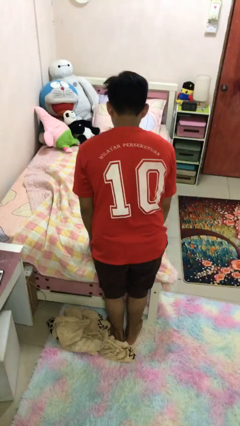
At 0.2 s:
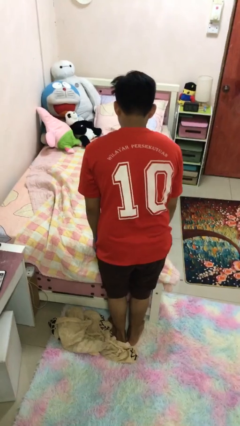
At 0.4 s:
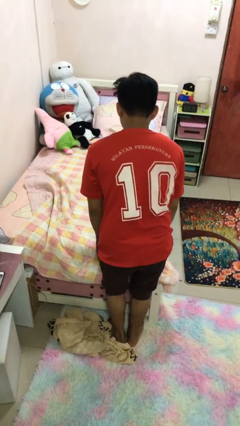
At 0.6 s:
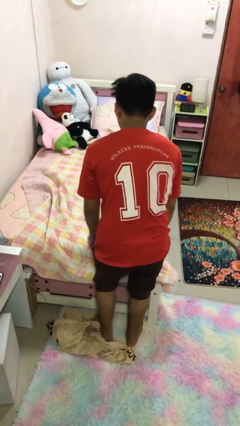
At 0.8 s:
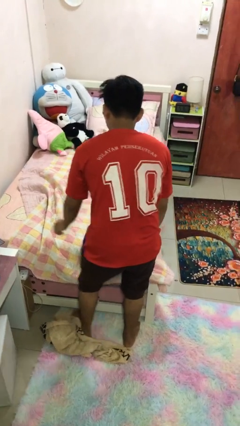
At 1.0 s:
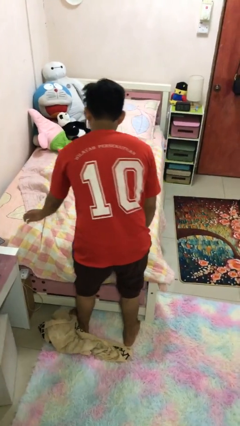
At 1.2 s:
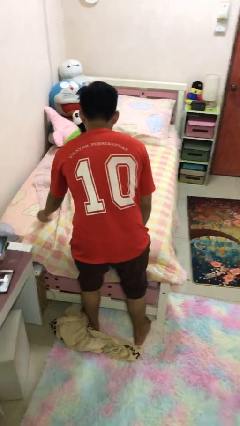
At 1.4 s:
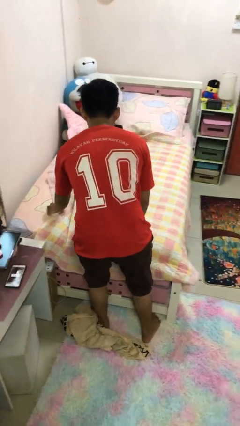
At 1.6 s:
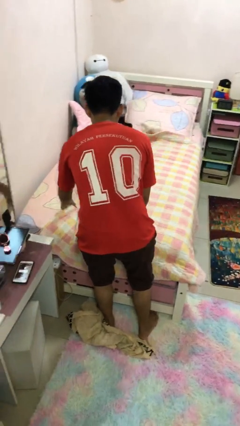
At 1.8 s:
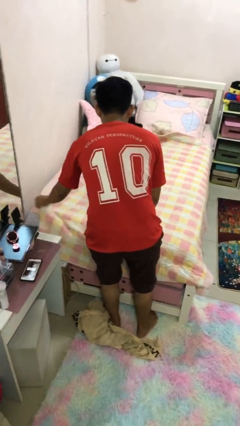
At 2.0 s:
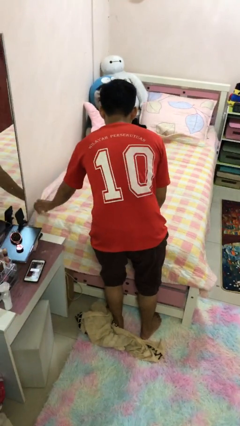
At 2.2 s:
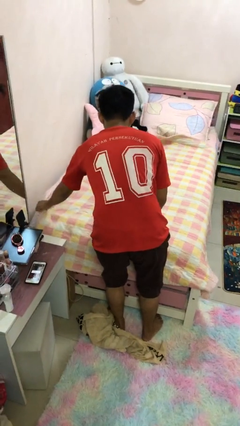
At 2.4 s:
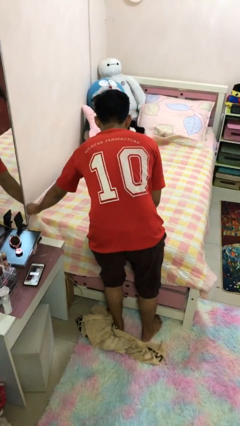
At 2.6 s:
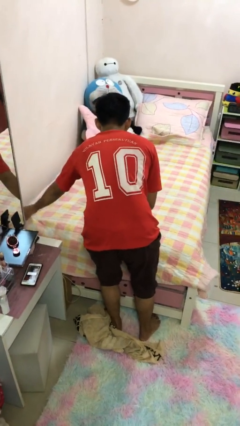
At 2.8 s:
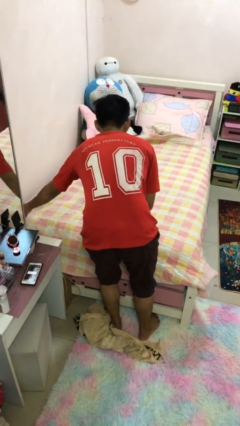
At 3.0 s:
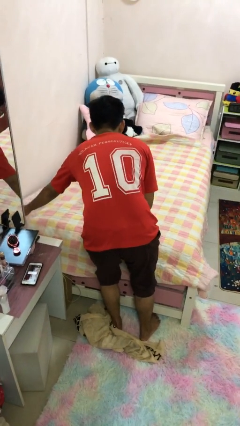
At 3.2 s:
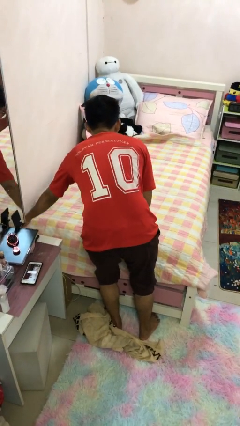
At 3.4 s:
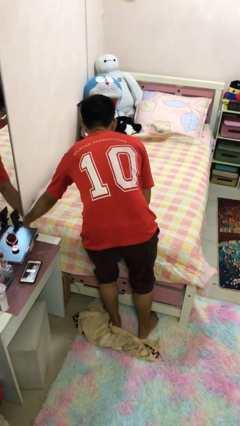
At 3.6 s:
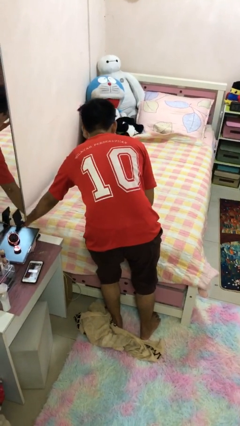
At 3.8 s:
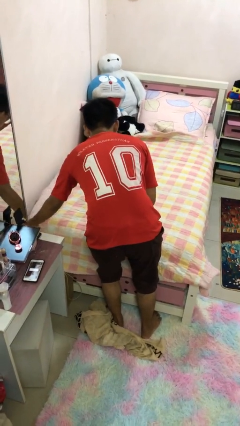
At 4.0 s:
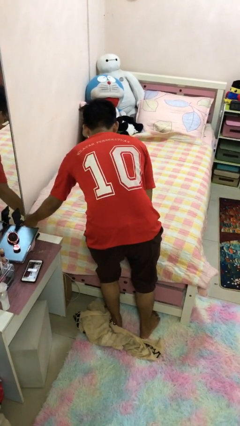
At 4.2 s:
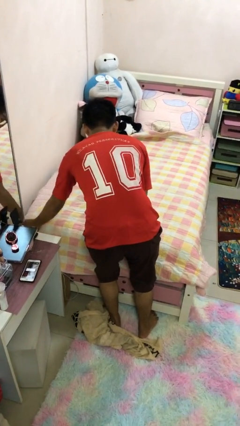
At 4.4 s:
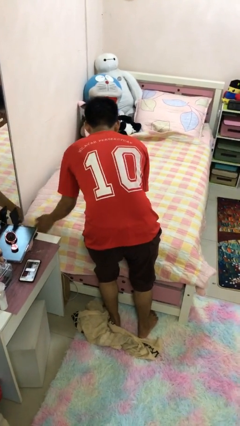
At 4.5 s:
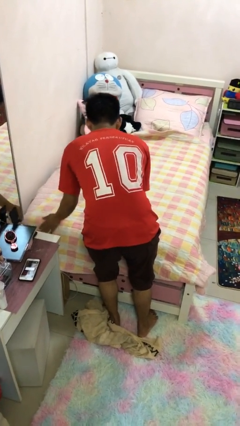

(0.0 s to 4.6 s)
person makes bed

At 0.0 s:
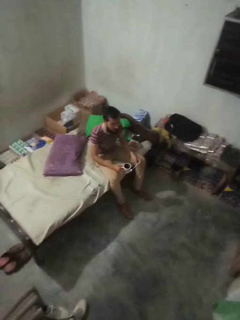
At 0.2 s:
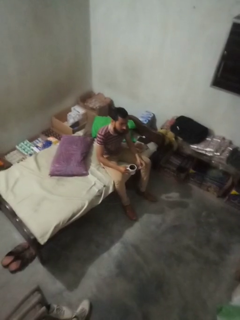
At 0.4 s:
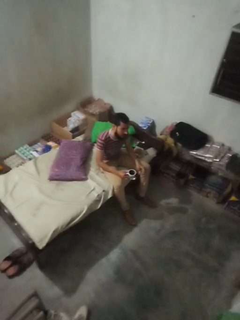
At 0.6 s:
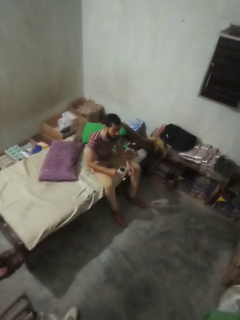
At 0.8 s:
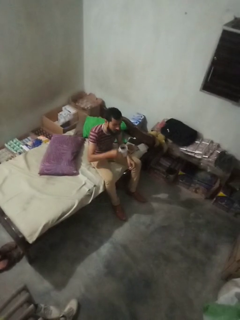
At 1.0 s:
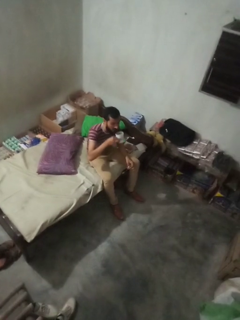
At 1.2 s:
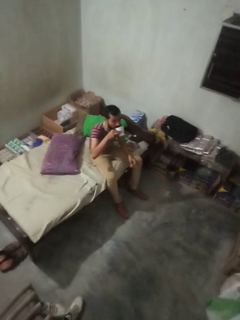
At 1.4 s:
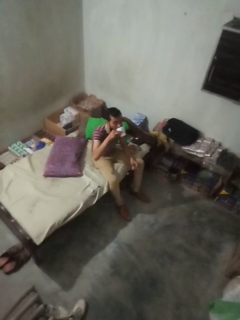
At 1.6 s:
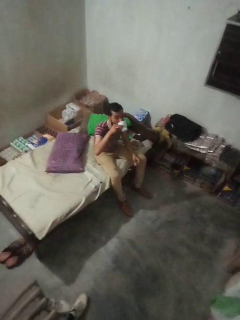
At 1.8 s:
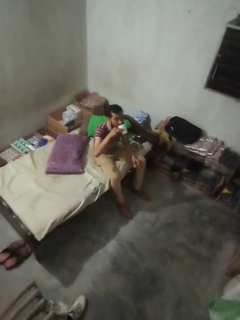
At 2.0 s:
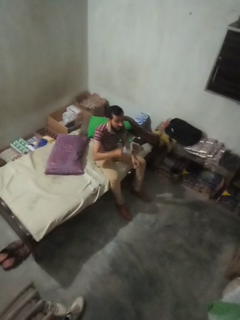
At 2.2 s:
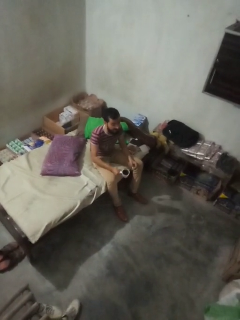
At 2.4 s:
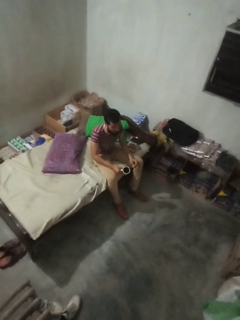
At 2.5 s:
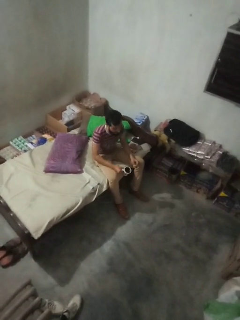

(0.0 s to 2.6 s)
person drinks from mug

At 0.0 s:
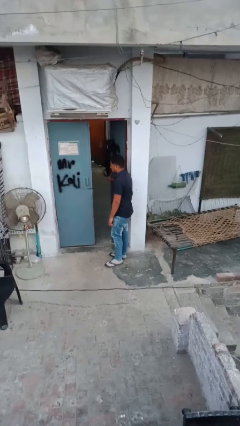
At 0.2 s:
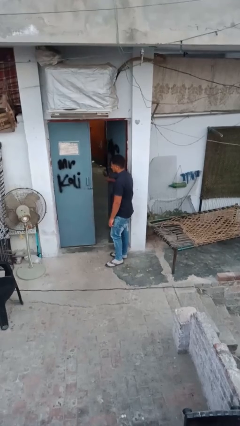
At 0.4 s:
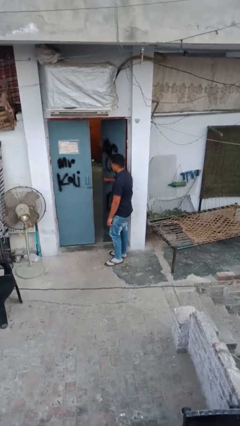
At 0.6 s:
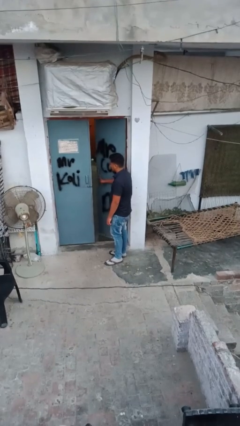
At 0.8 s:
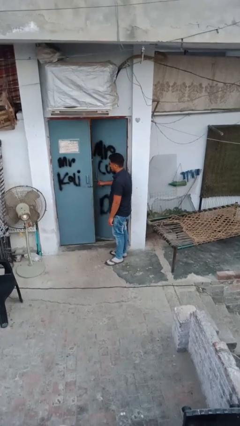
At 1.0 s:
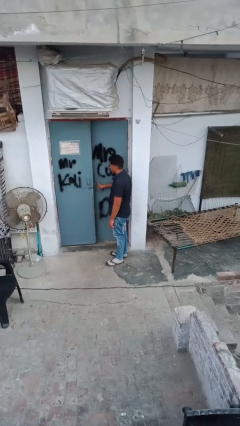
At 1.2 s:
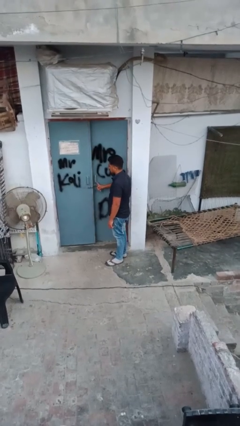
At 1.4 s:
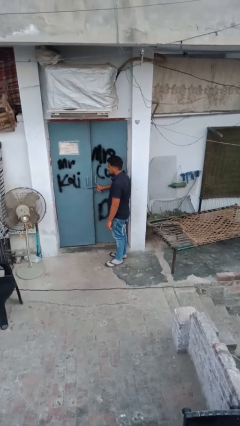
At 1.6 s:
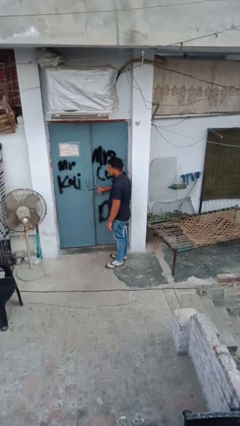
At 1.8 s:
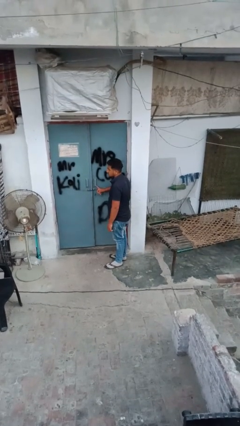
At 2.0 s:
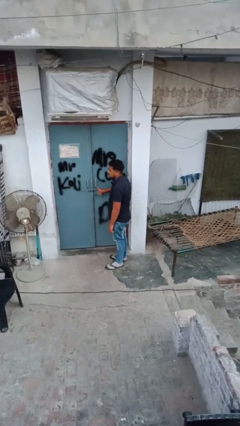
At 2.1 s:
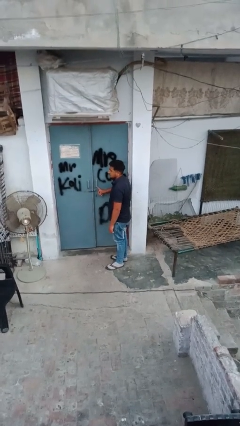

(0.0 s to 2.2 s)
person closes facility door

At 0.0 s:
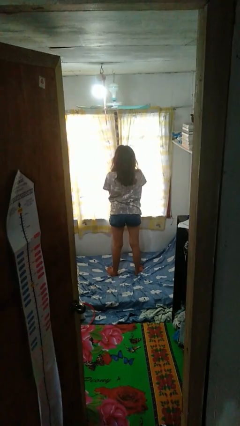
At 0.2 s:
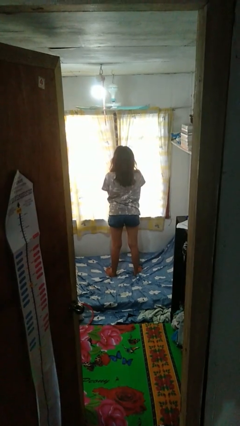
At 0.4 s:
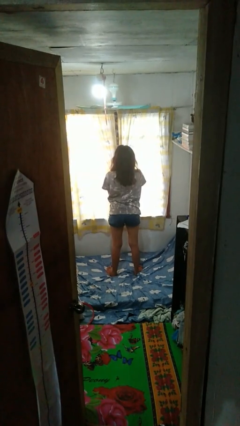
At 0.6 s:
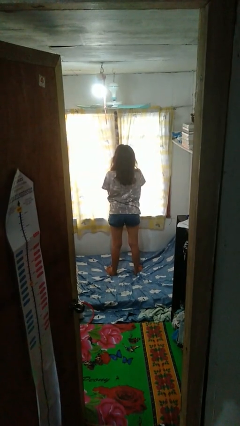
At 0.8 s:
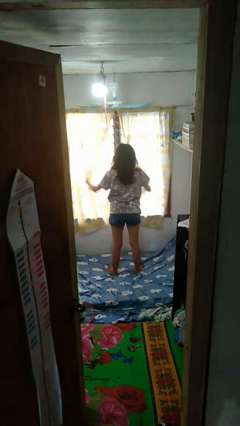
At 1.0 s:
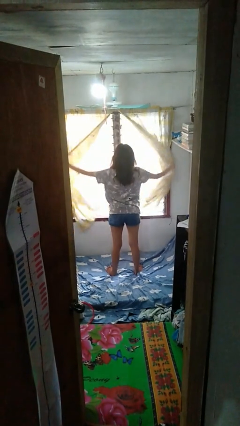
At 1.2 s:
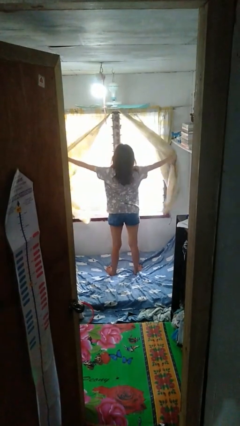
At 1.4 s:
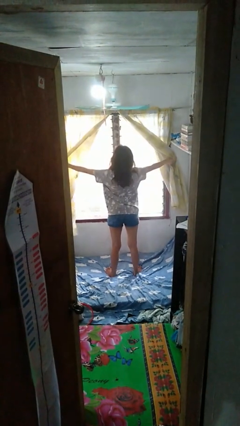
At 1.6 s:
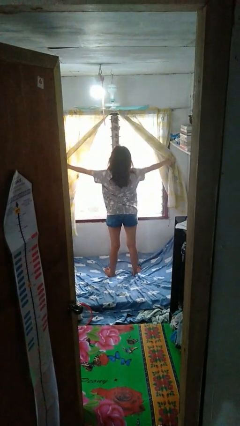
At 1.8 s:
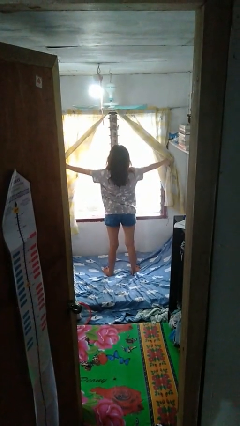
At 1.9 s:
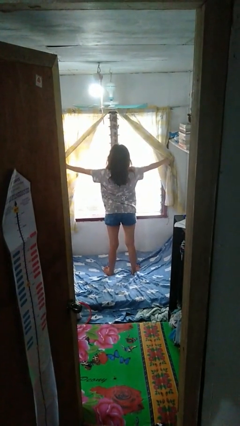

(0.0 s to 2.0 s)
person opens curtains

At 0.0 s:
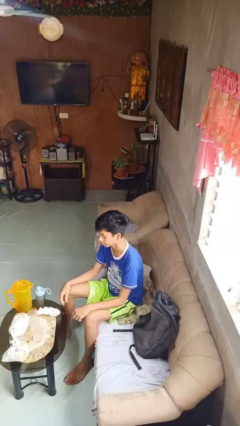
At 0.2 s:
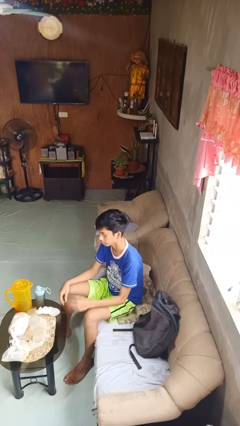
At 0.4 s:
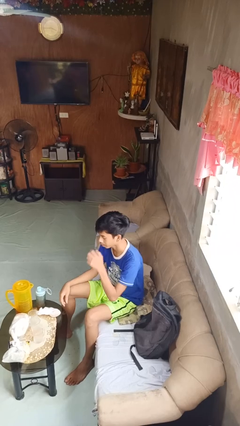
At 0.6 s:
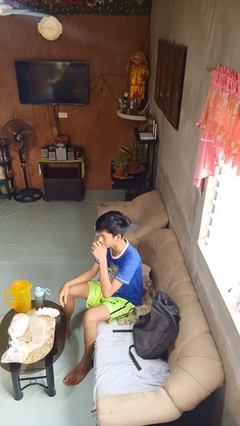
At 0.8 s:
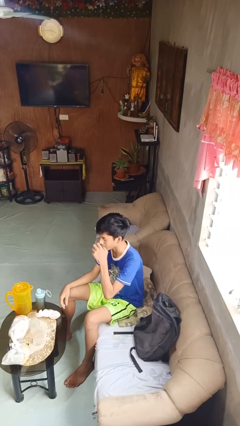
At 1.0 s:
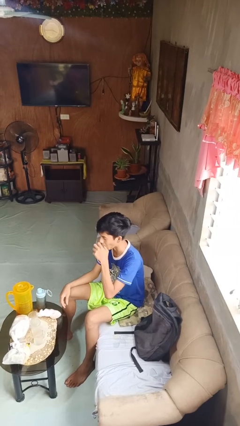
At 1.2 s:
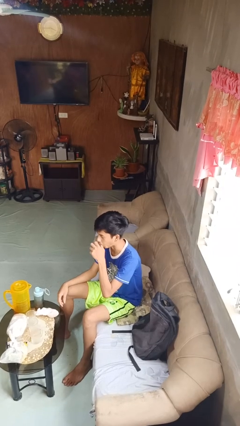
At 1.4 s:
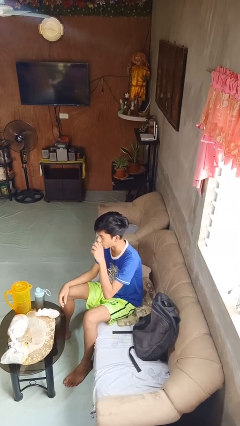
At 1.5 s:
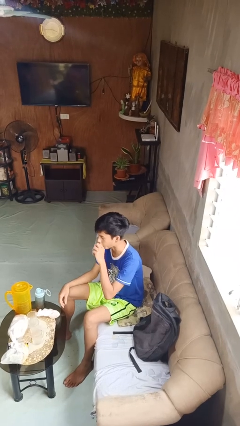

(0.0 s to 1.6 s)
person licks fingers

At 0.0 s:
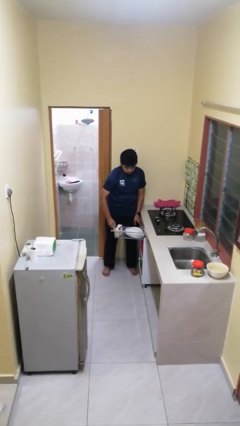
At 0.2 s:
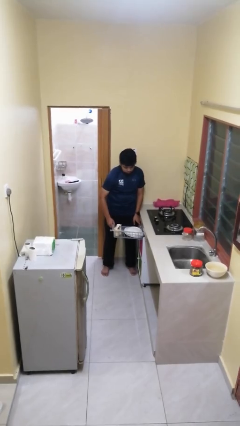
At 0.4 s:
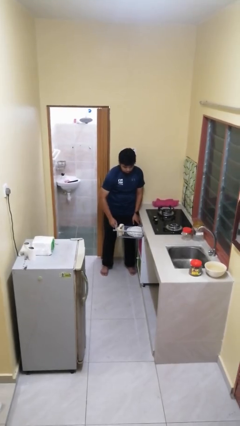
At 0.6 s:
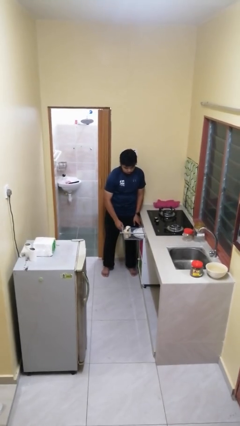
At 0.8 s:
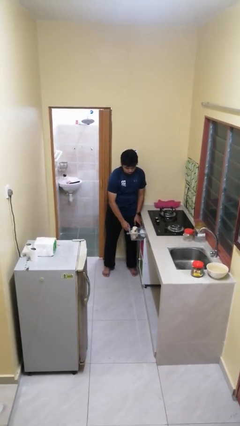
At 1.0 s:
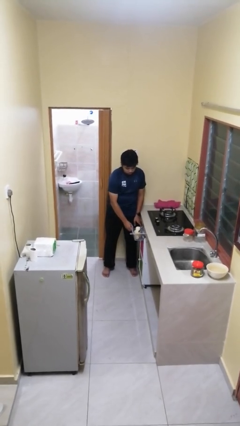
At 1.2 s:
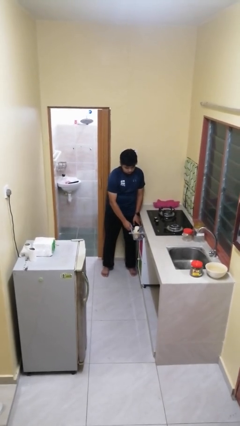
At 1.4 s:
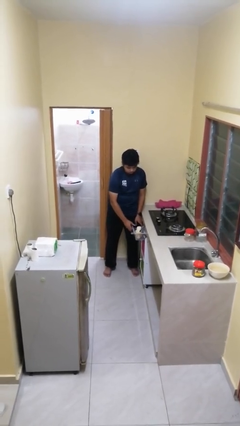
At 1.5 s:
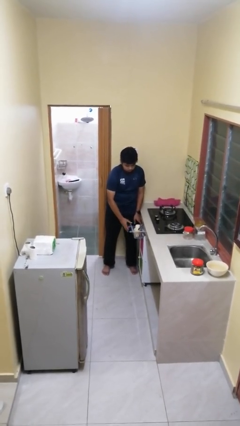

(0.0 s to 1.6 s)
person closes kitchen drawer

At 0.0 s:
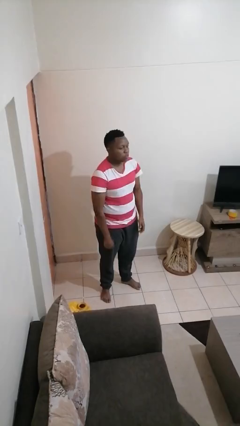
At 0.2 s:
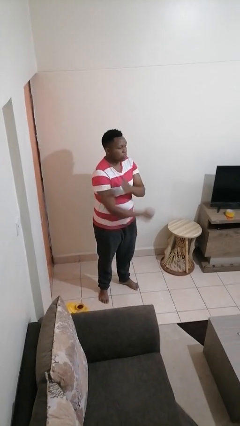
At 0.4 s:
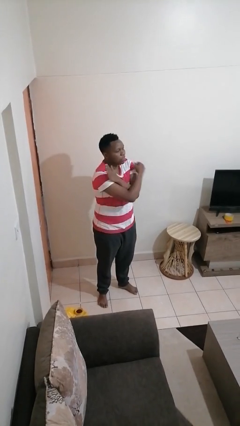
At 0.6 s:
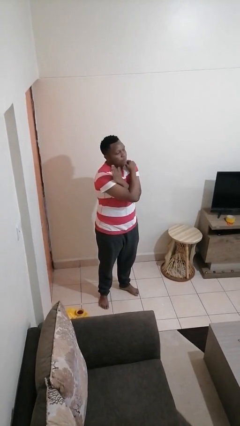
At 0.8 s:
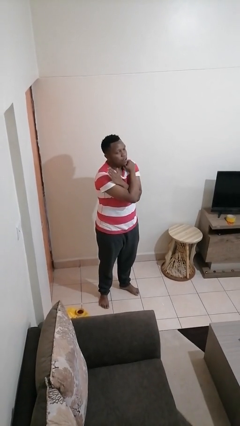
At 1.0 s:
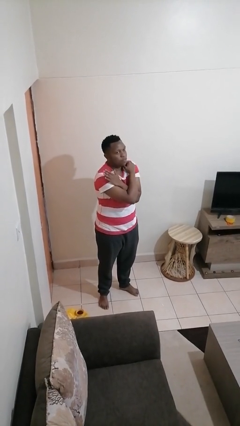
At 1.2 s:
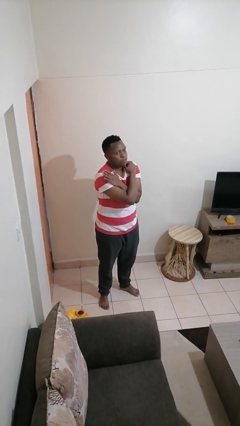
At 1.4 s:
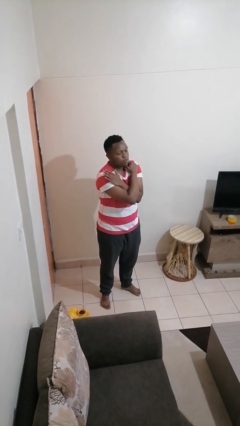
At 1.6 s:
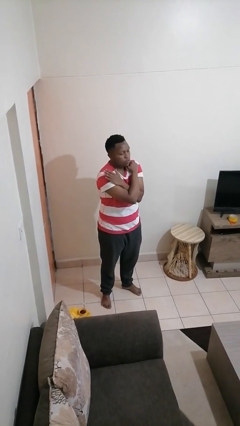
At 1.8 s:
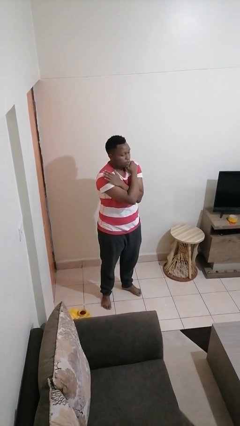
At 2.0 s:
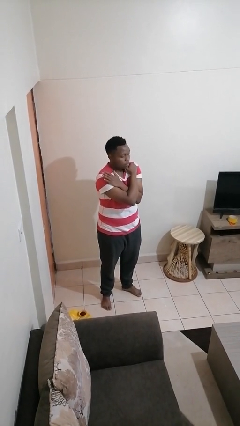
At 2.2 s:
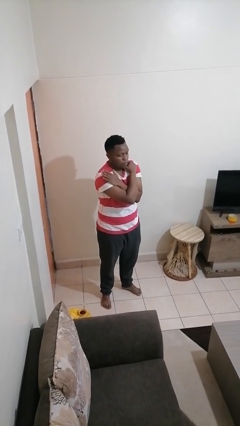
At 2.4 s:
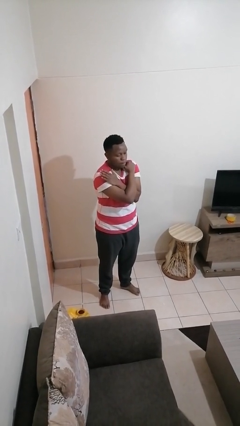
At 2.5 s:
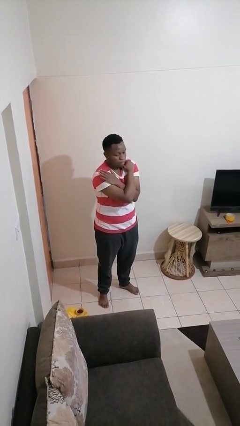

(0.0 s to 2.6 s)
person gestures arms x
